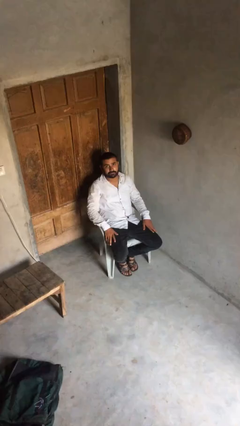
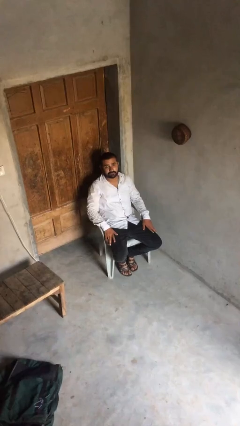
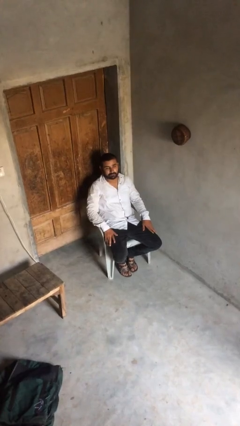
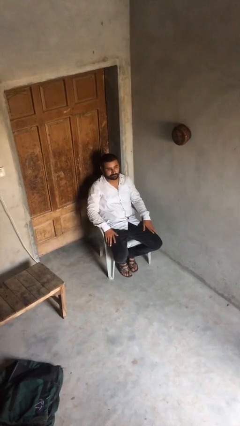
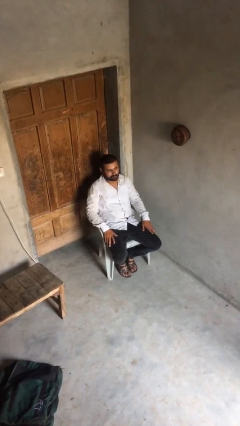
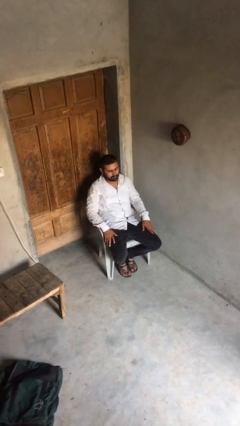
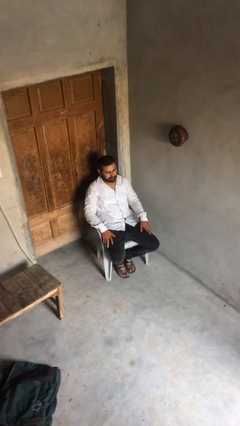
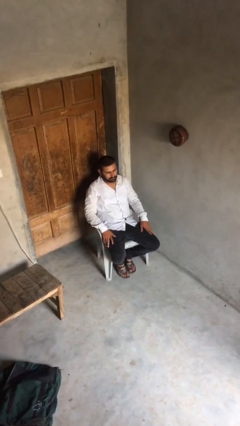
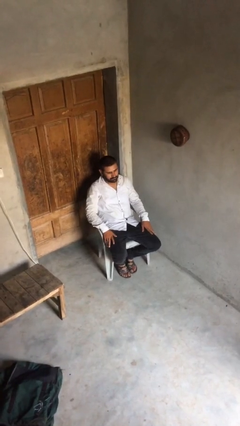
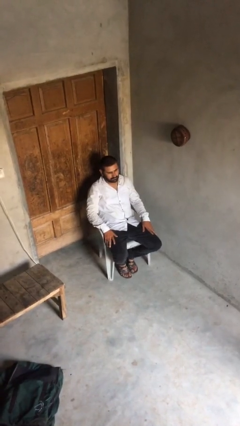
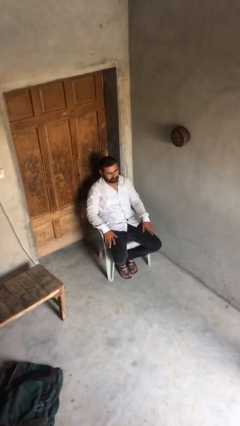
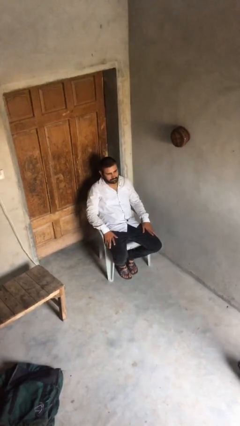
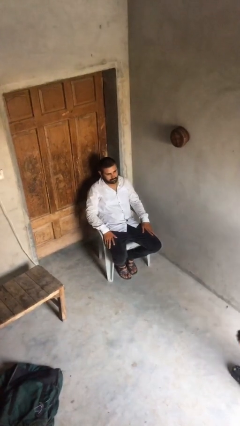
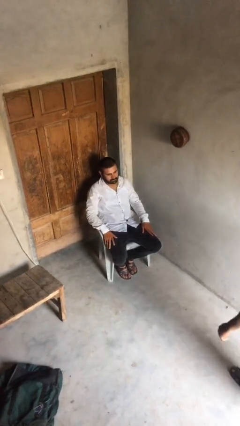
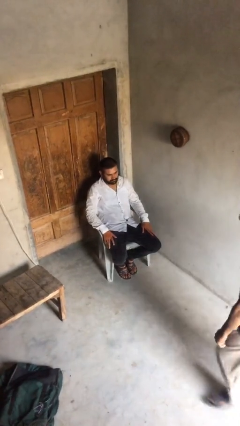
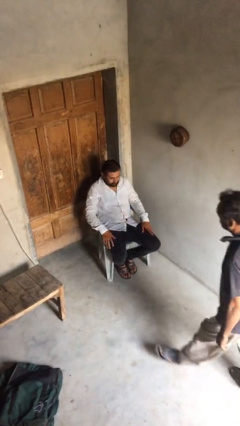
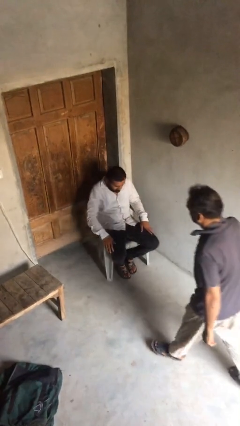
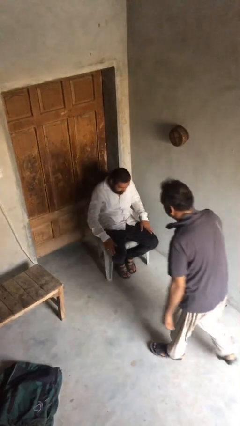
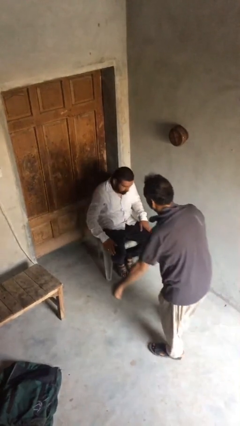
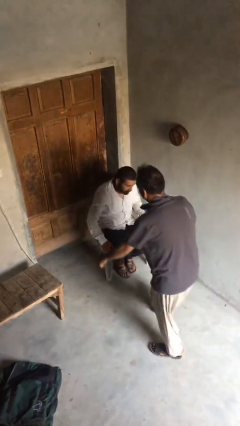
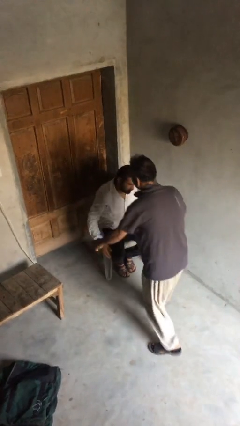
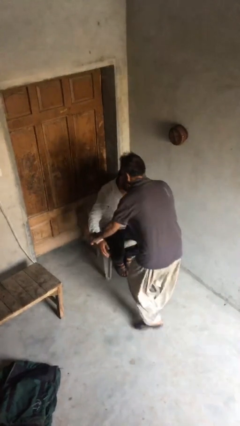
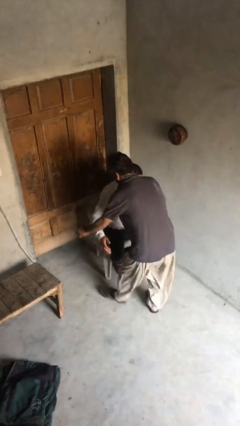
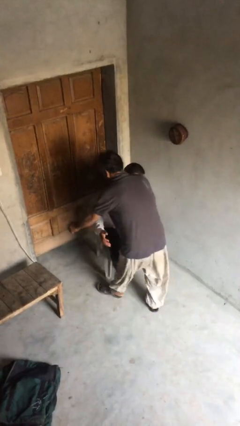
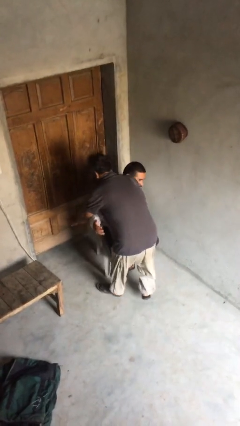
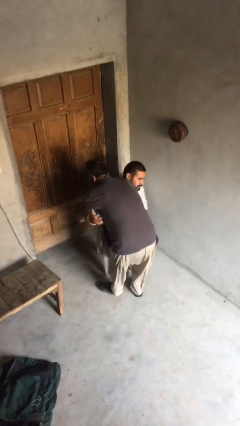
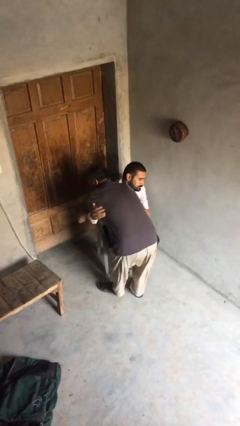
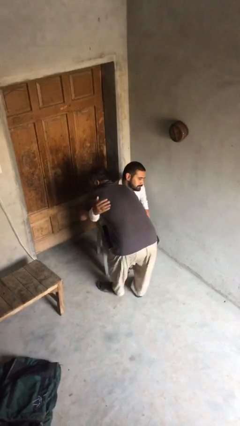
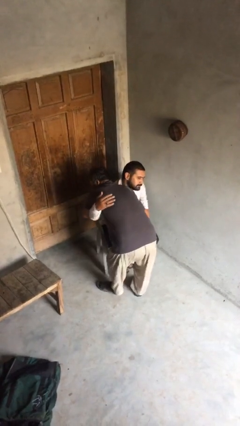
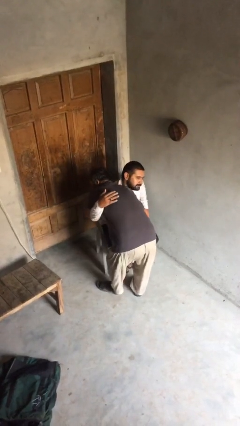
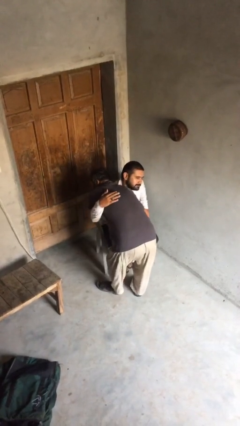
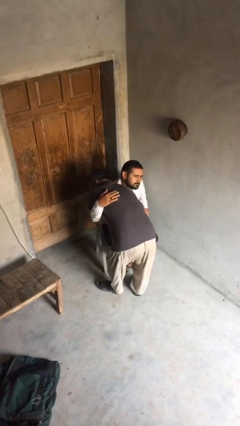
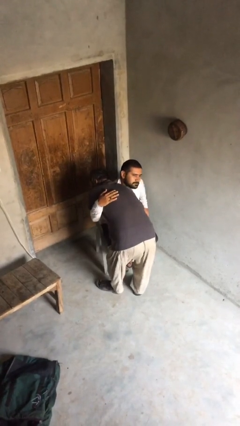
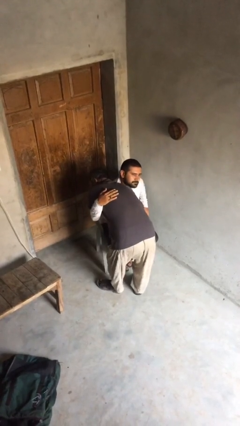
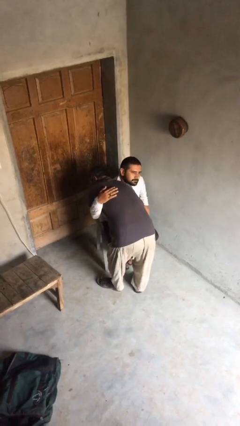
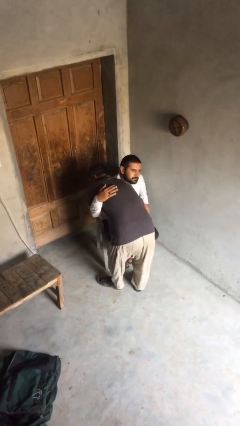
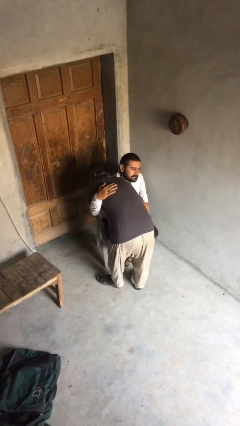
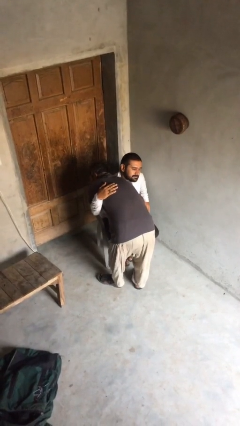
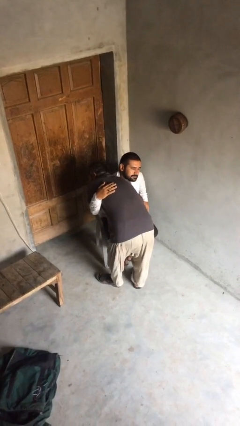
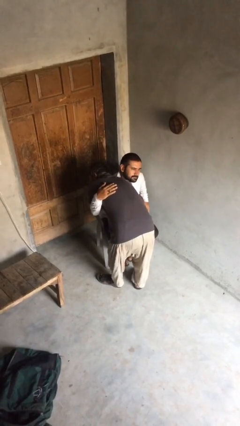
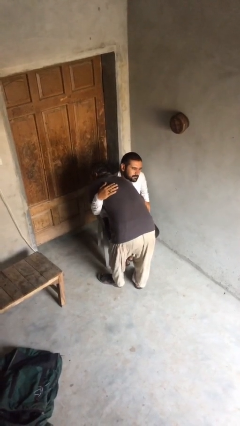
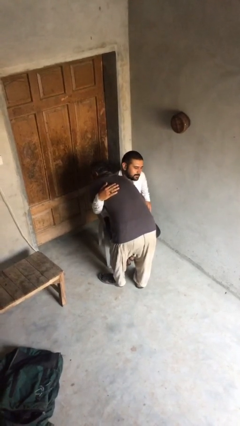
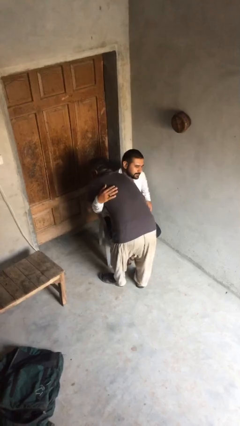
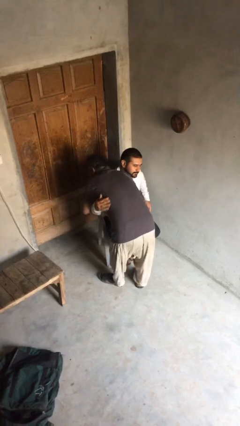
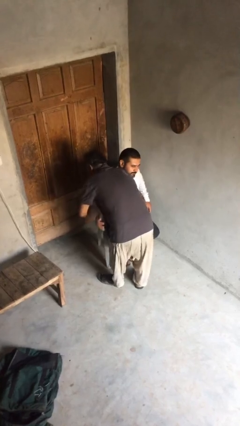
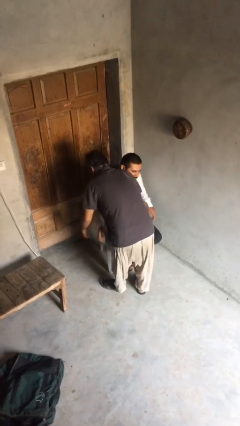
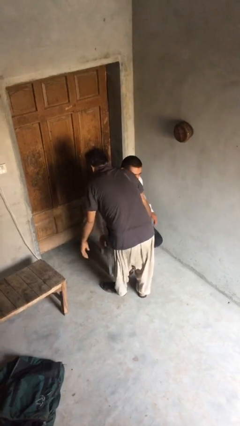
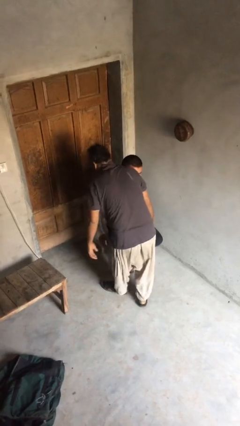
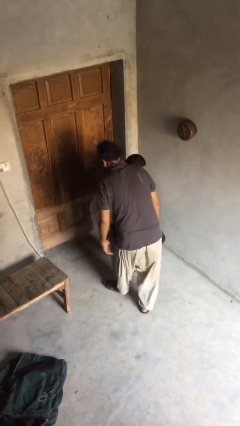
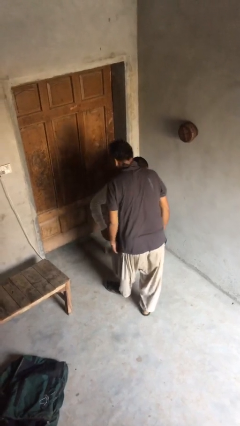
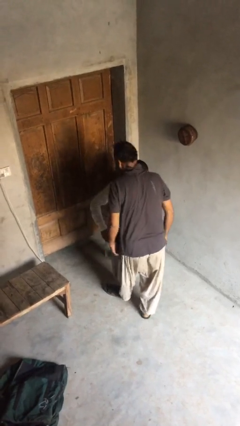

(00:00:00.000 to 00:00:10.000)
person embraces person

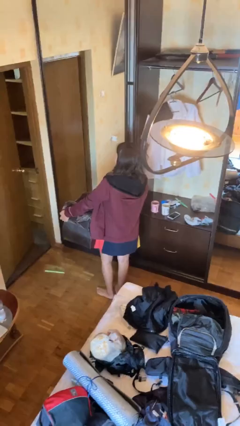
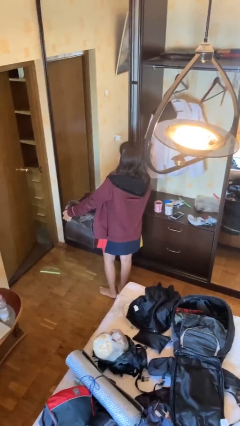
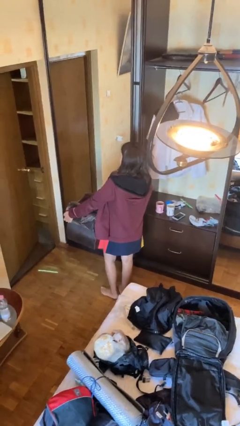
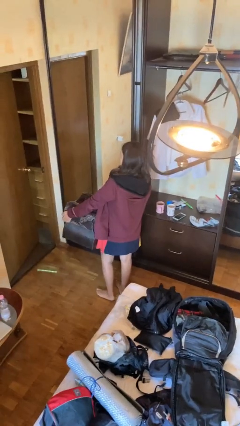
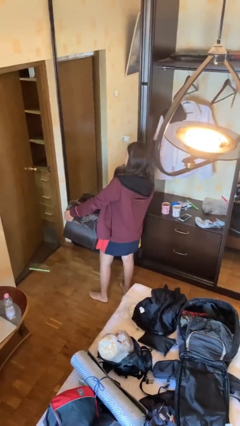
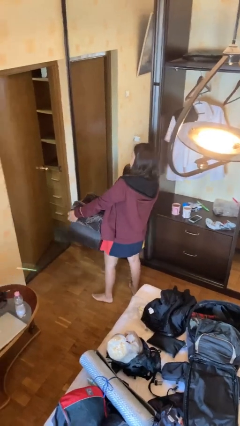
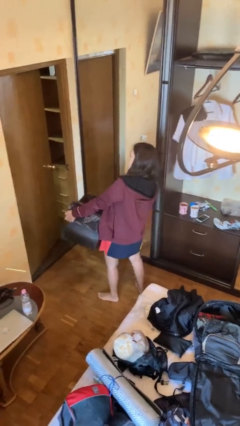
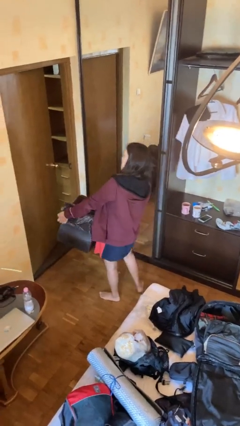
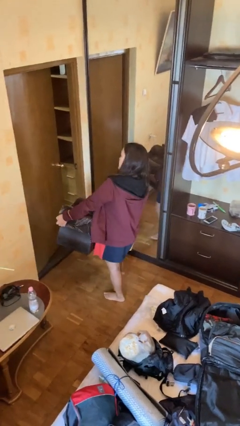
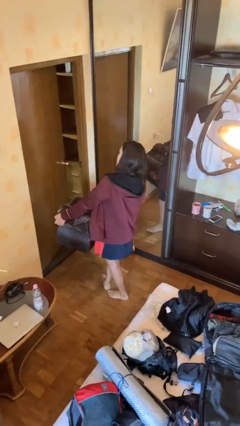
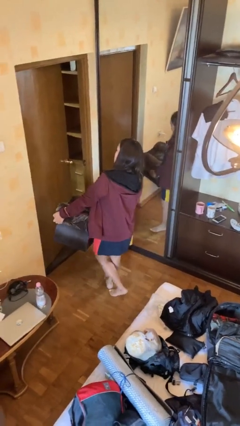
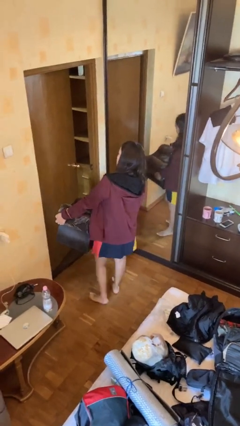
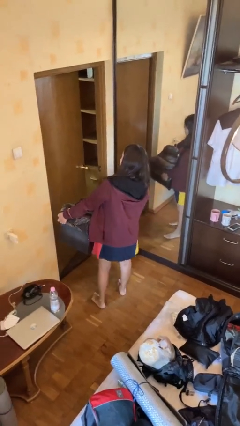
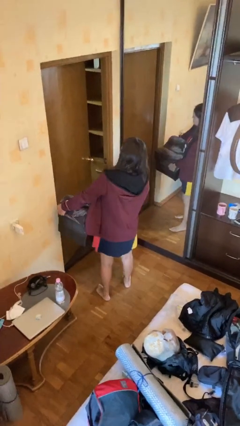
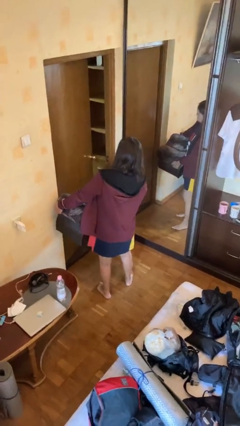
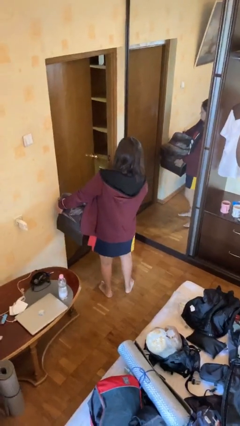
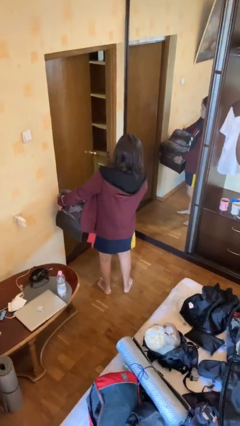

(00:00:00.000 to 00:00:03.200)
person carries furniture

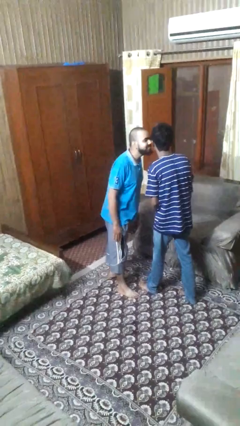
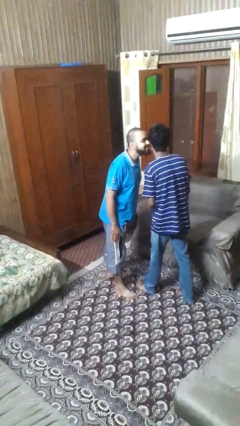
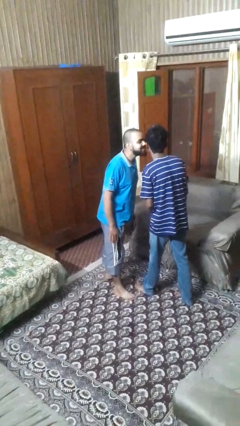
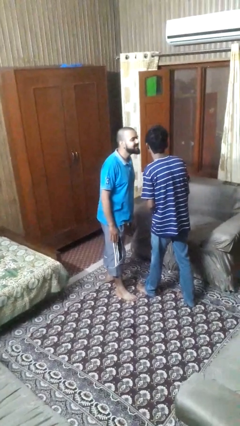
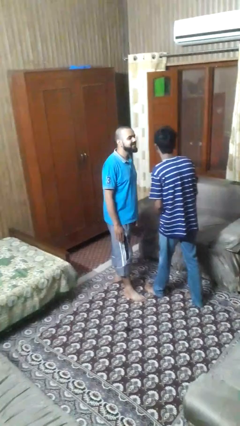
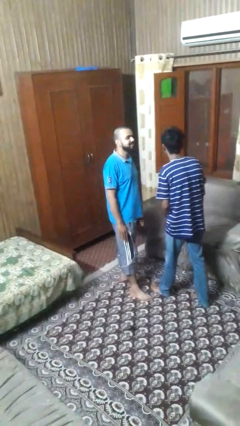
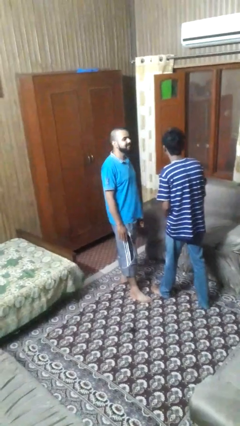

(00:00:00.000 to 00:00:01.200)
person kisses cheek of person

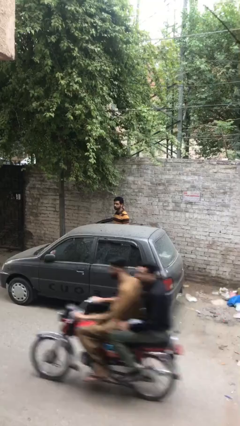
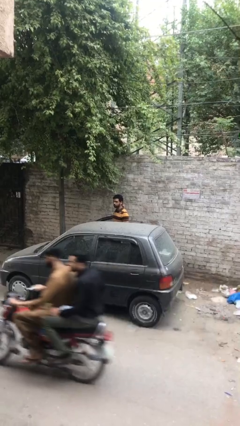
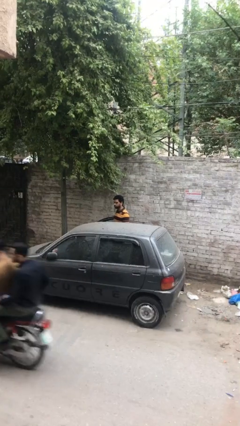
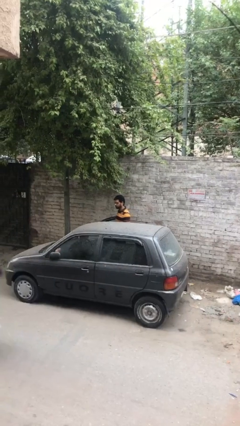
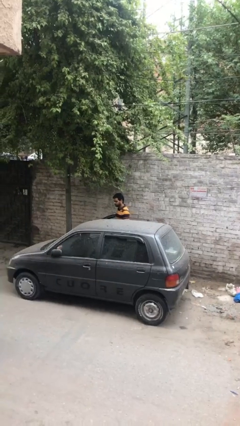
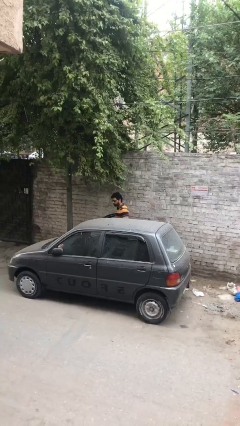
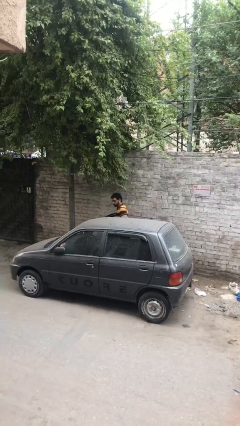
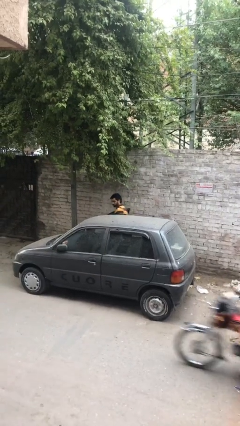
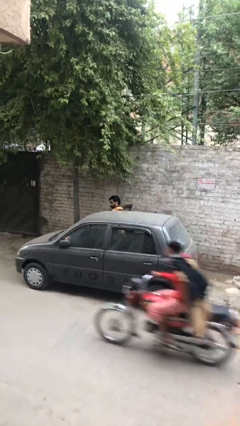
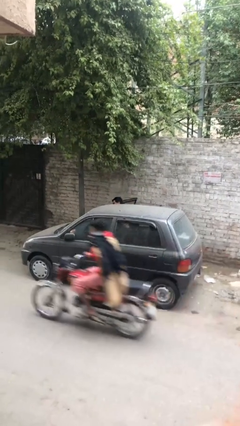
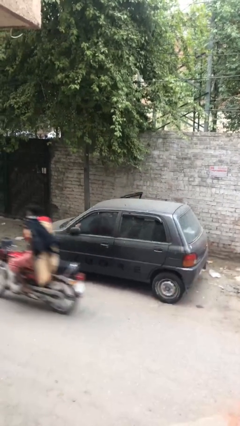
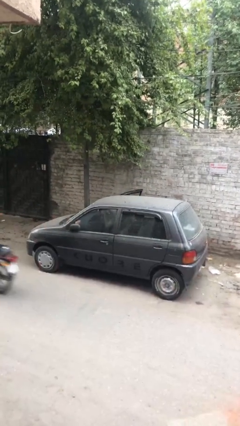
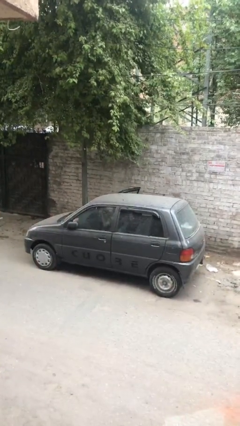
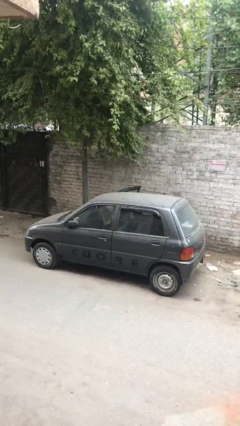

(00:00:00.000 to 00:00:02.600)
person enters car

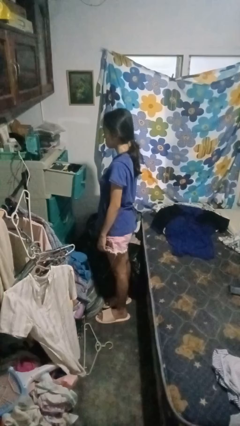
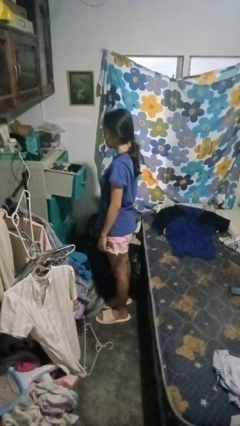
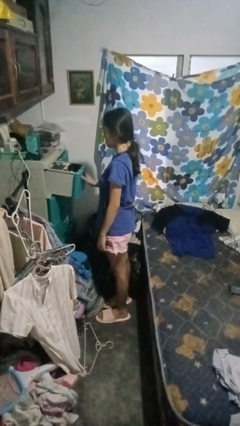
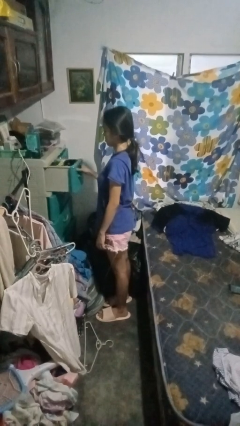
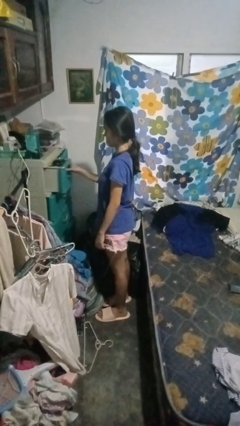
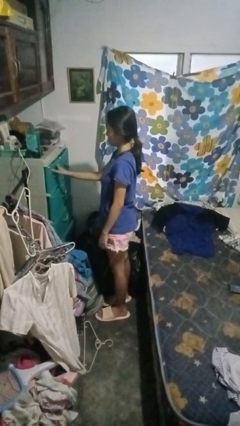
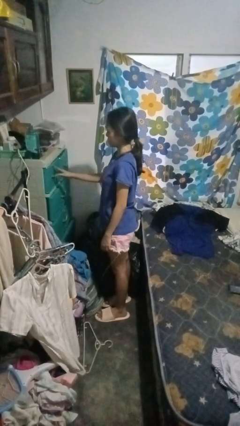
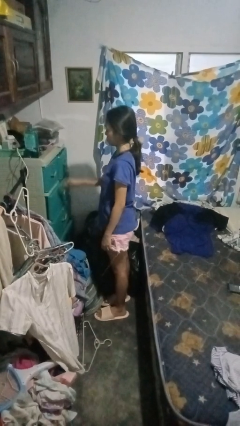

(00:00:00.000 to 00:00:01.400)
person closes dresser drawer
